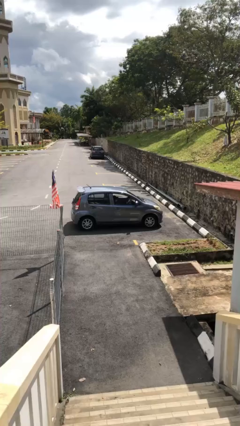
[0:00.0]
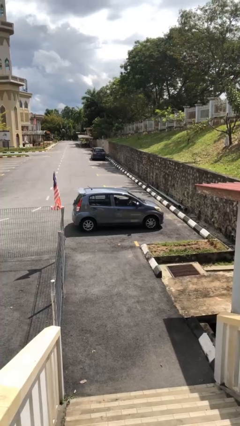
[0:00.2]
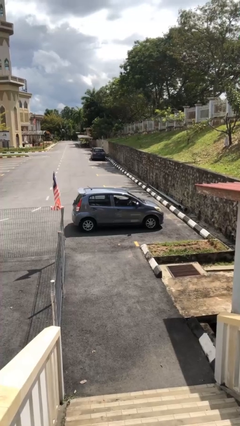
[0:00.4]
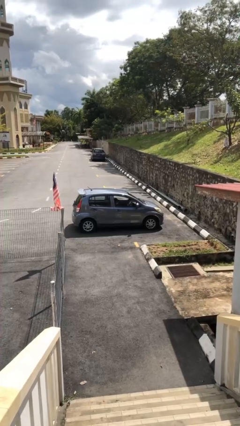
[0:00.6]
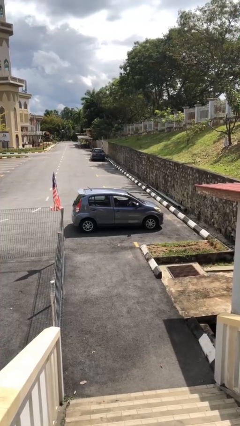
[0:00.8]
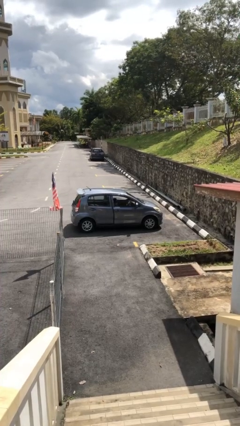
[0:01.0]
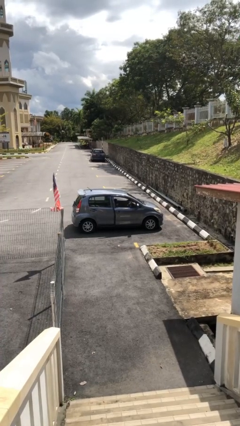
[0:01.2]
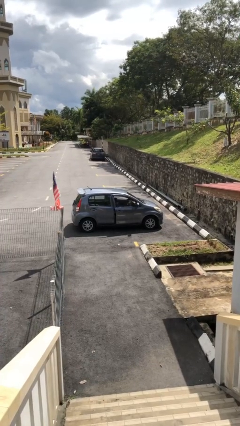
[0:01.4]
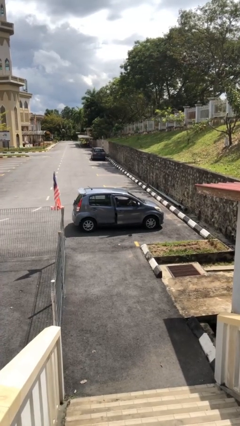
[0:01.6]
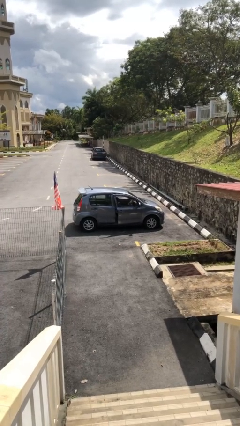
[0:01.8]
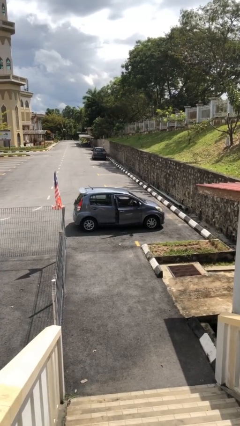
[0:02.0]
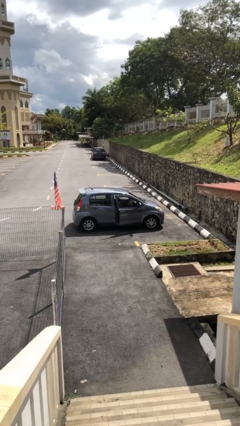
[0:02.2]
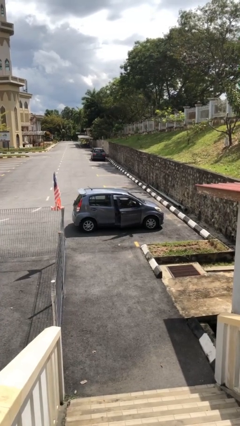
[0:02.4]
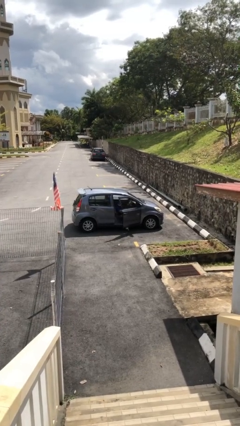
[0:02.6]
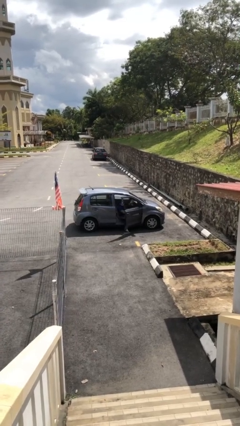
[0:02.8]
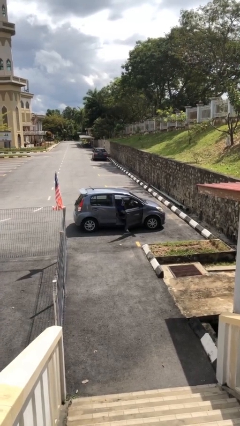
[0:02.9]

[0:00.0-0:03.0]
person opens car door

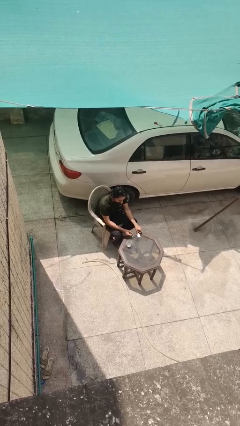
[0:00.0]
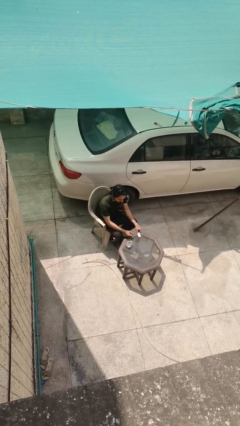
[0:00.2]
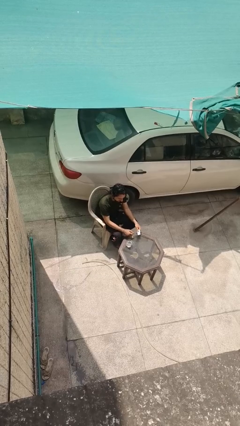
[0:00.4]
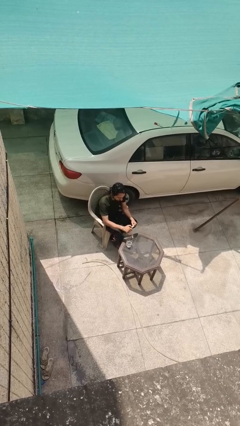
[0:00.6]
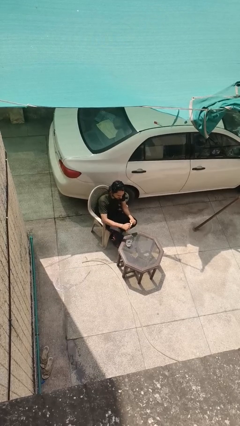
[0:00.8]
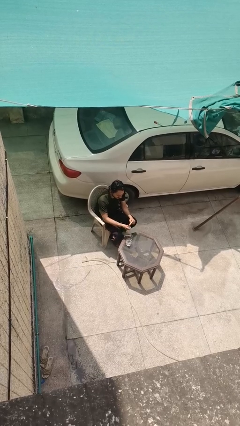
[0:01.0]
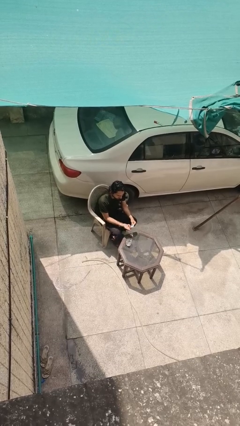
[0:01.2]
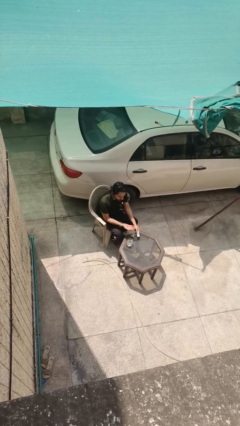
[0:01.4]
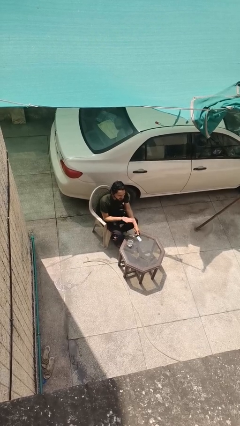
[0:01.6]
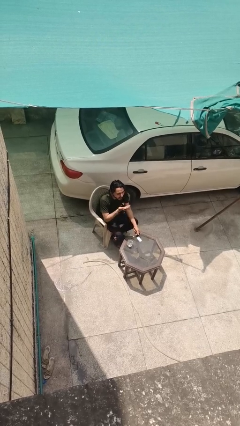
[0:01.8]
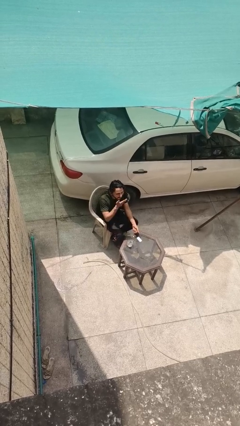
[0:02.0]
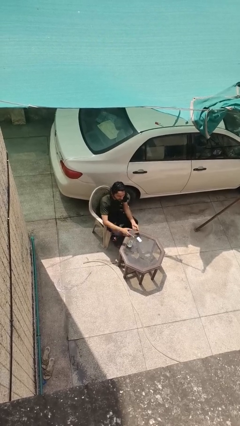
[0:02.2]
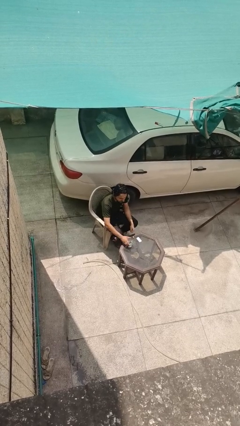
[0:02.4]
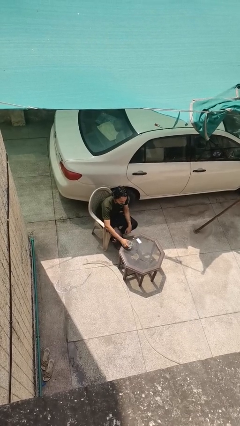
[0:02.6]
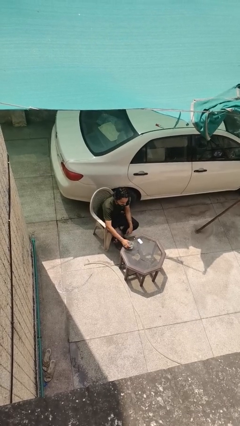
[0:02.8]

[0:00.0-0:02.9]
person takes medicine pills

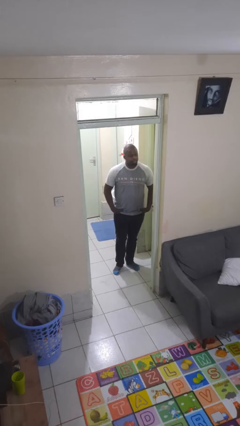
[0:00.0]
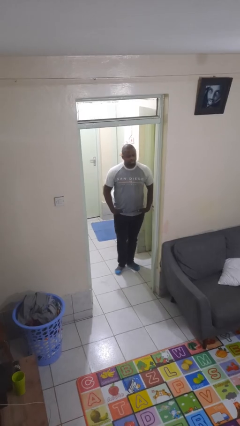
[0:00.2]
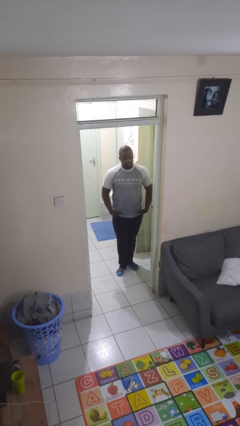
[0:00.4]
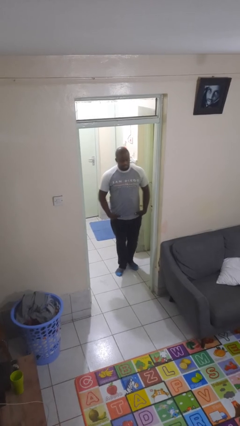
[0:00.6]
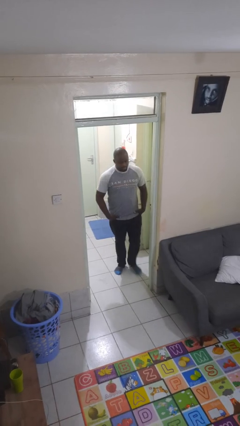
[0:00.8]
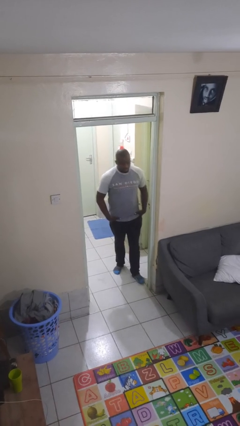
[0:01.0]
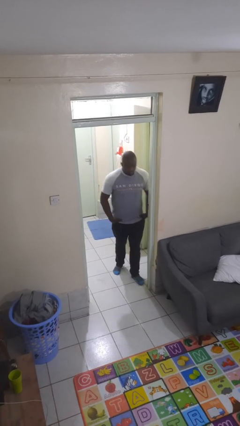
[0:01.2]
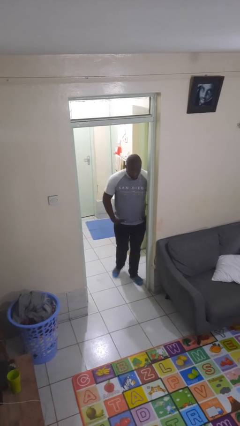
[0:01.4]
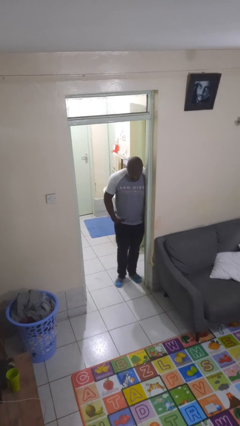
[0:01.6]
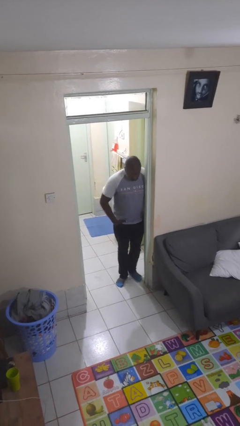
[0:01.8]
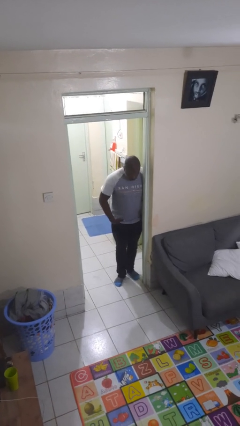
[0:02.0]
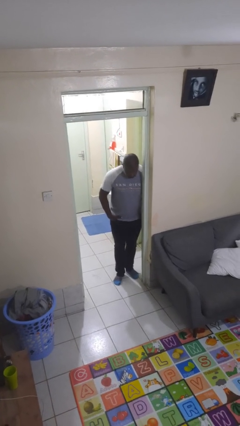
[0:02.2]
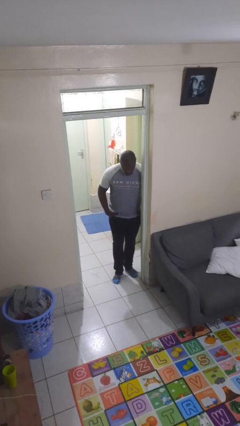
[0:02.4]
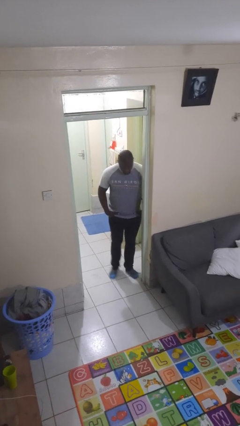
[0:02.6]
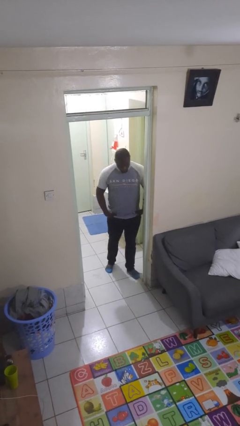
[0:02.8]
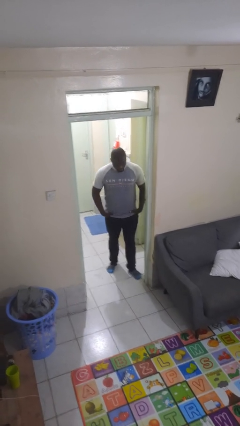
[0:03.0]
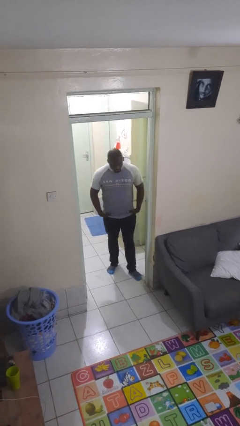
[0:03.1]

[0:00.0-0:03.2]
person bumps into wall

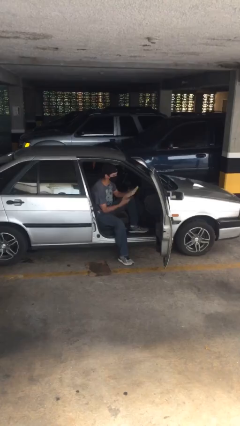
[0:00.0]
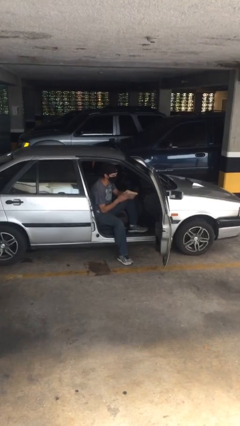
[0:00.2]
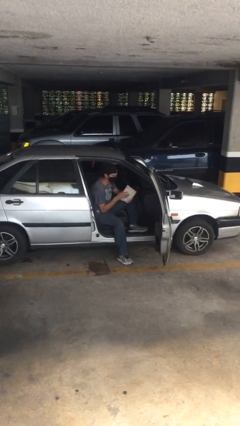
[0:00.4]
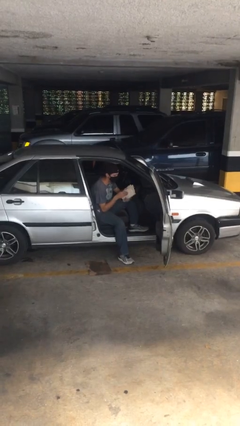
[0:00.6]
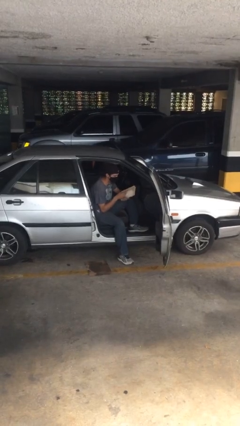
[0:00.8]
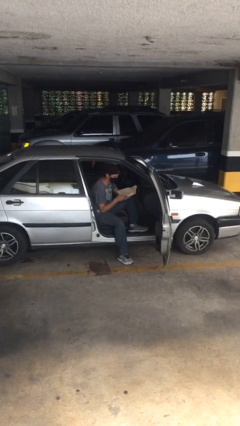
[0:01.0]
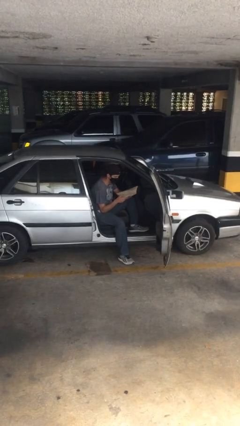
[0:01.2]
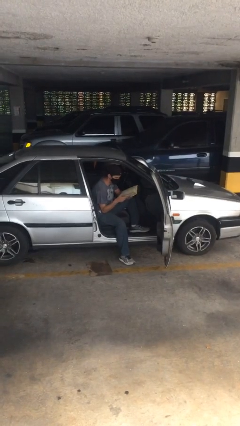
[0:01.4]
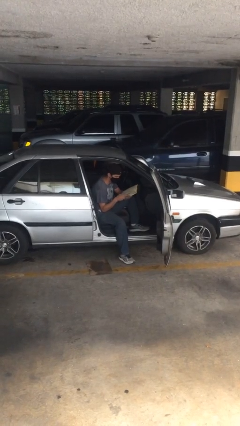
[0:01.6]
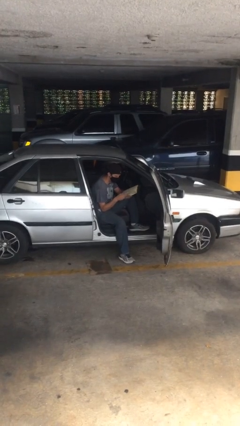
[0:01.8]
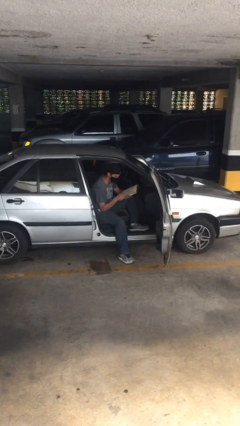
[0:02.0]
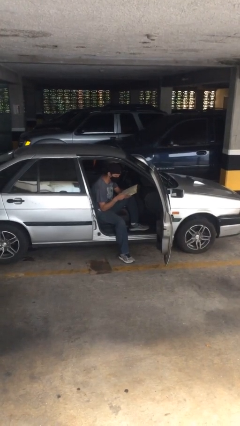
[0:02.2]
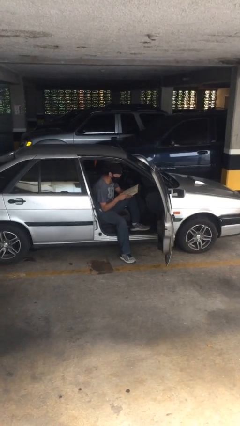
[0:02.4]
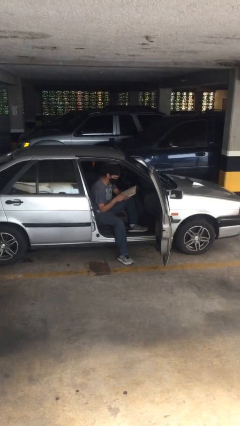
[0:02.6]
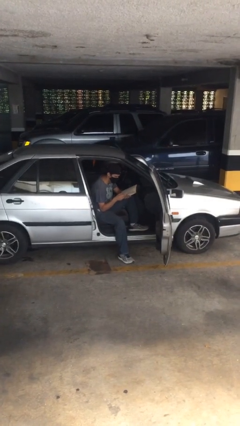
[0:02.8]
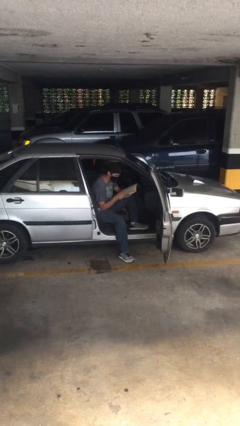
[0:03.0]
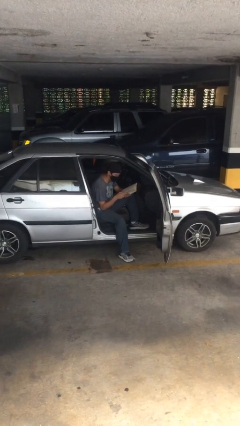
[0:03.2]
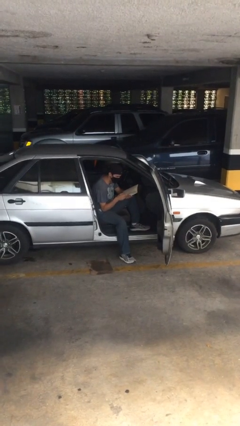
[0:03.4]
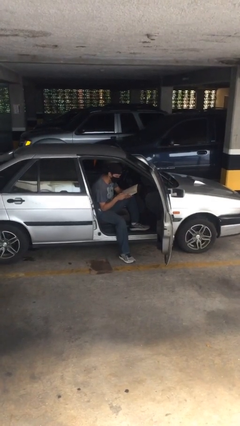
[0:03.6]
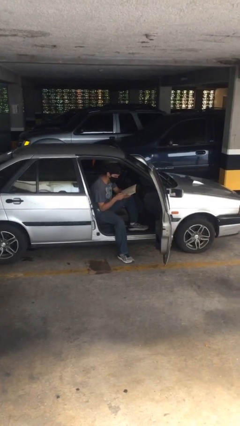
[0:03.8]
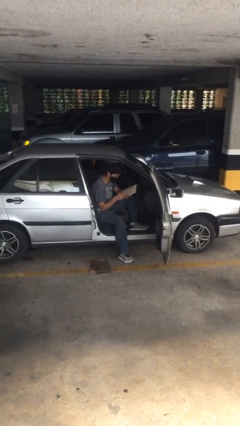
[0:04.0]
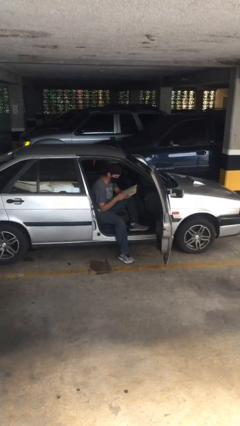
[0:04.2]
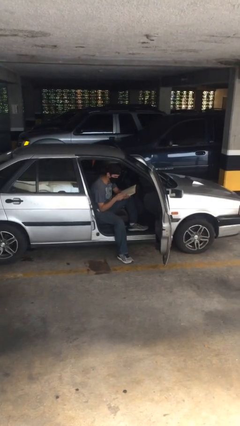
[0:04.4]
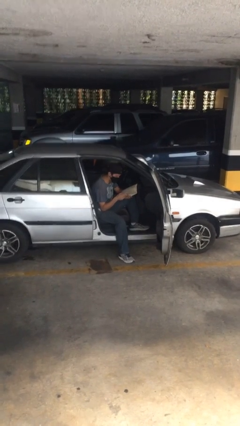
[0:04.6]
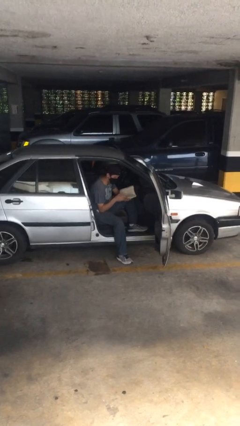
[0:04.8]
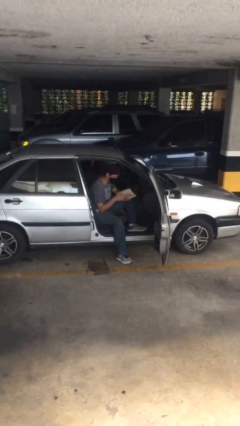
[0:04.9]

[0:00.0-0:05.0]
person reads document

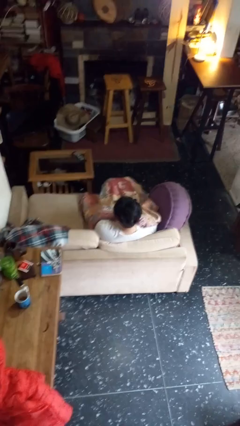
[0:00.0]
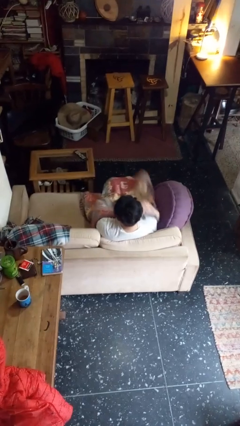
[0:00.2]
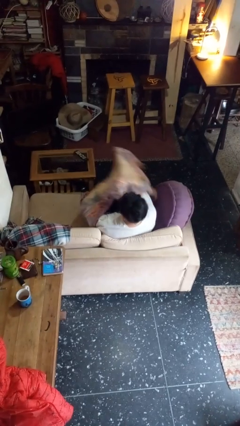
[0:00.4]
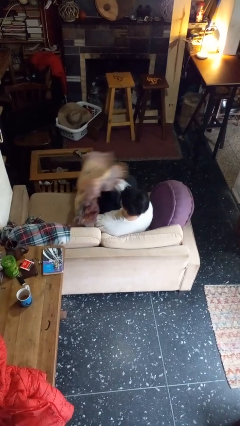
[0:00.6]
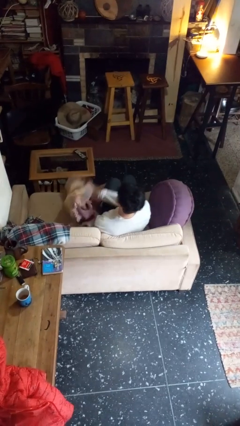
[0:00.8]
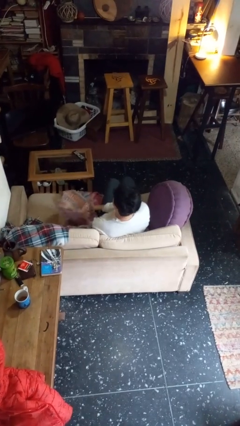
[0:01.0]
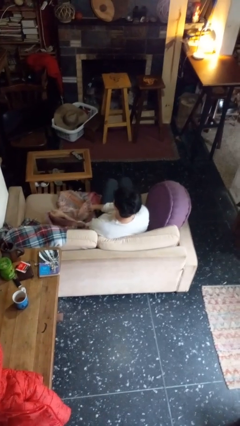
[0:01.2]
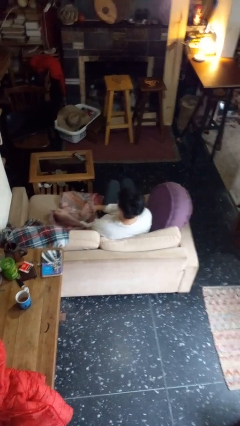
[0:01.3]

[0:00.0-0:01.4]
person uncovers with blanket

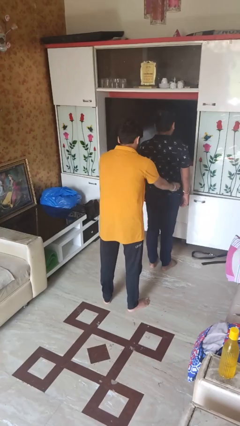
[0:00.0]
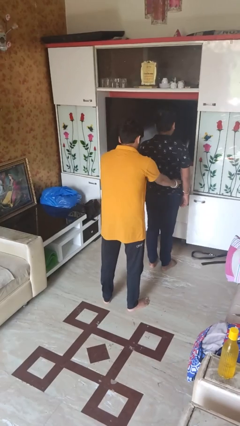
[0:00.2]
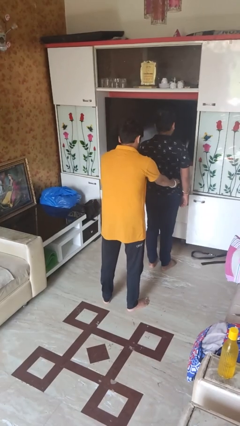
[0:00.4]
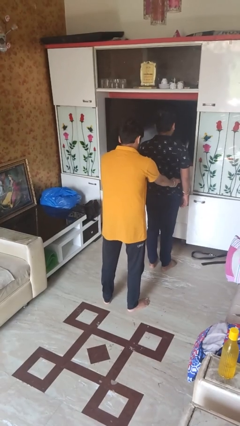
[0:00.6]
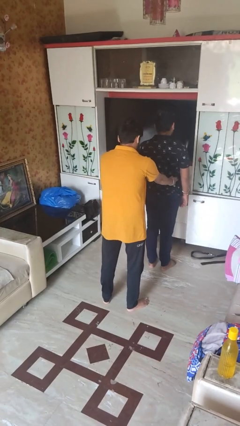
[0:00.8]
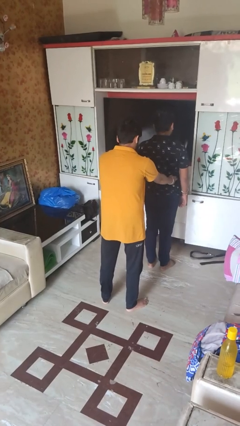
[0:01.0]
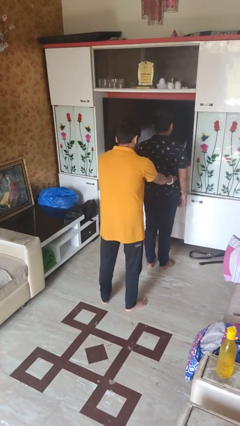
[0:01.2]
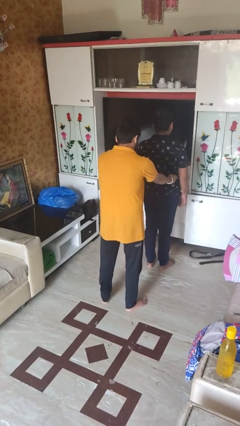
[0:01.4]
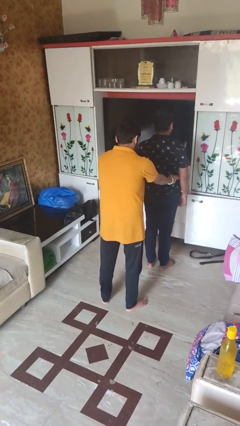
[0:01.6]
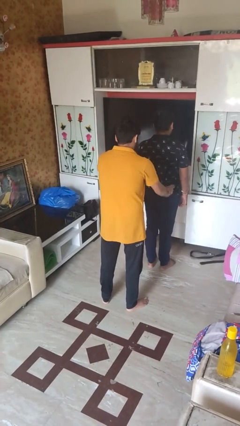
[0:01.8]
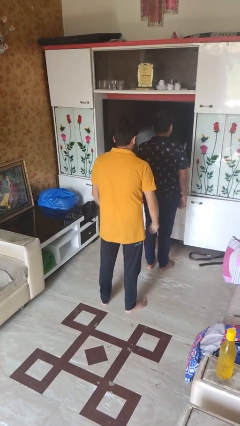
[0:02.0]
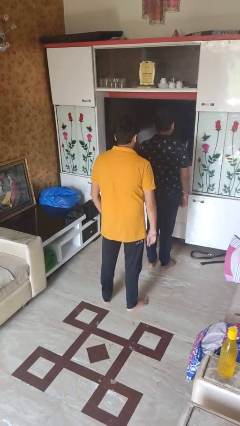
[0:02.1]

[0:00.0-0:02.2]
person tickles person

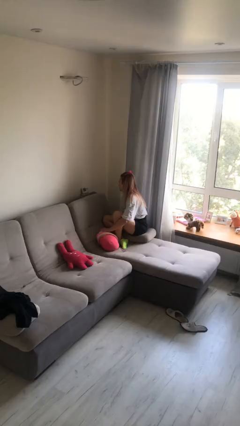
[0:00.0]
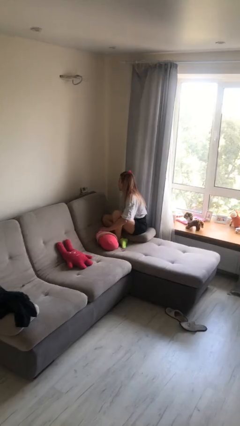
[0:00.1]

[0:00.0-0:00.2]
person adjusts thermostat
